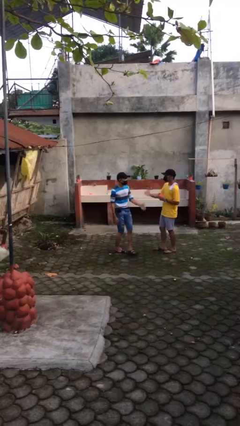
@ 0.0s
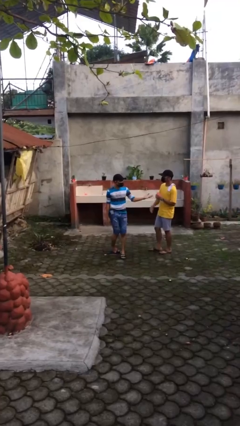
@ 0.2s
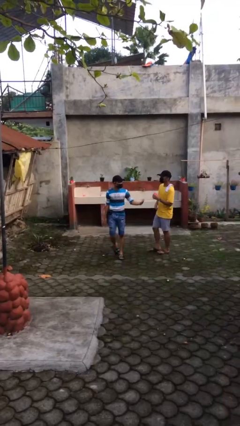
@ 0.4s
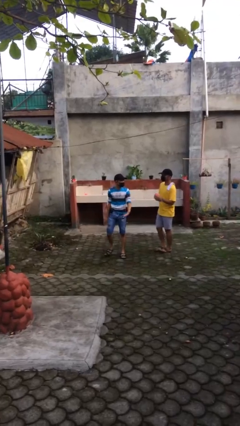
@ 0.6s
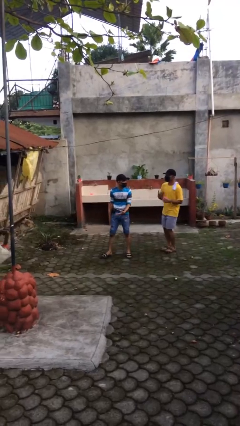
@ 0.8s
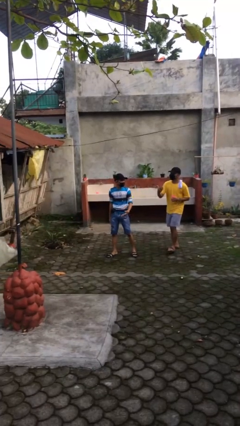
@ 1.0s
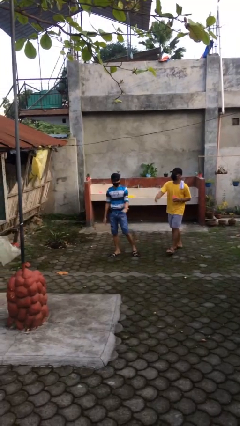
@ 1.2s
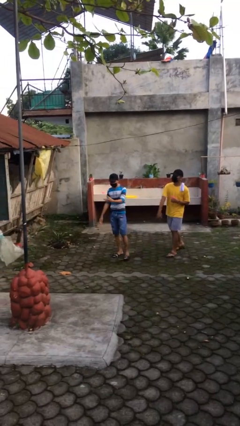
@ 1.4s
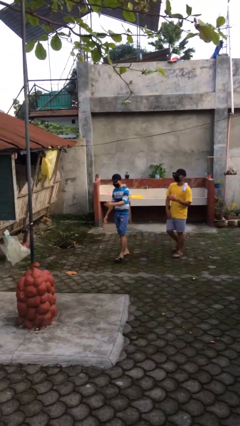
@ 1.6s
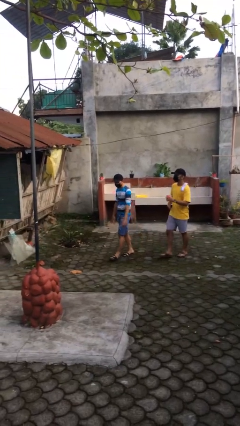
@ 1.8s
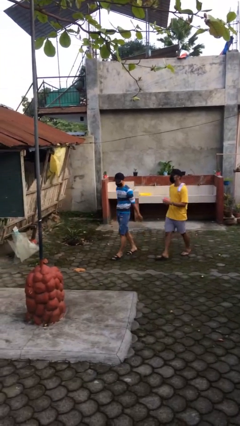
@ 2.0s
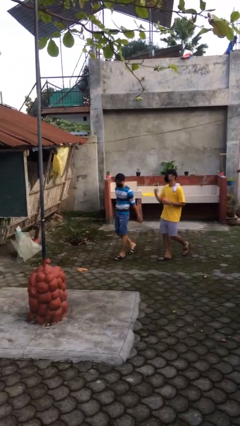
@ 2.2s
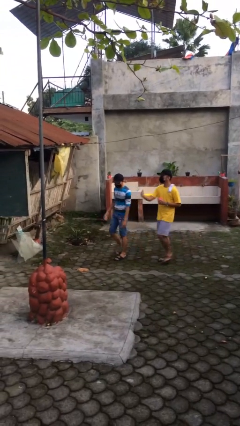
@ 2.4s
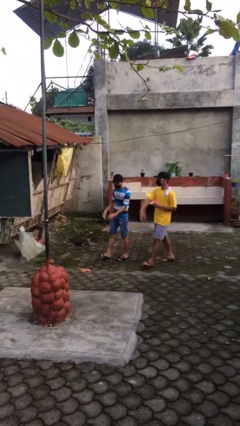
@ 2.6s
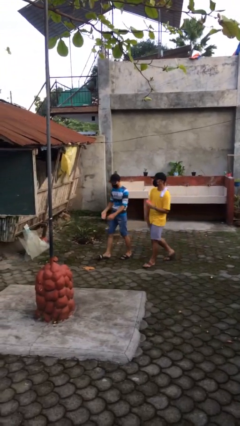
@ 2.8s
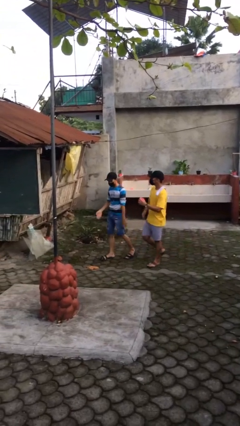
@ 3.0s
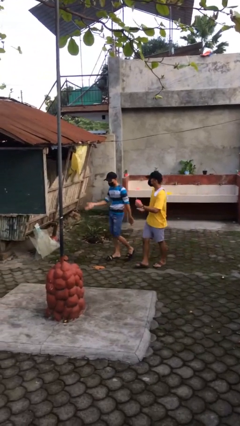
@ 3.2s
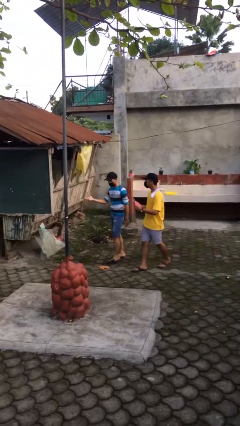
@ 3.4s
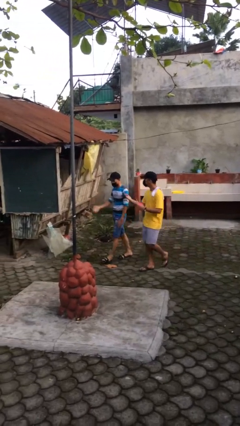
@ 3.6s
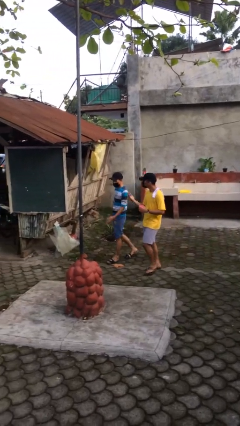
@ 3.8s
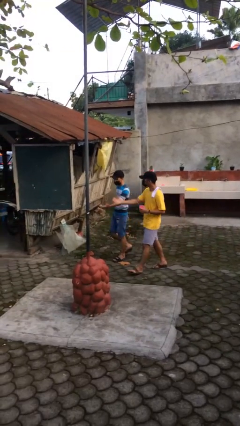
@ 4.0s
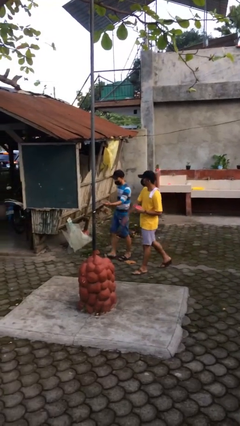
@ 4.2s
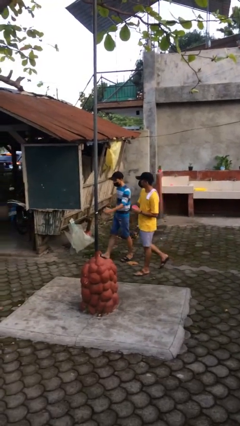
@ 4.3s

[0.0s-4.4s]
person talks to person

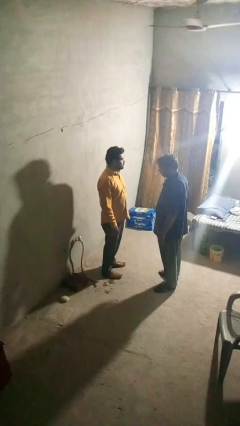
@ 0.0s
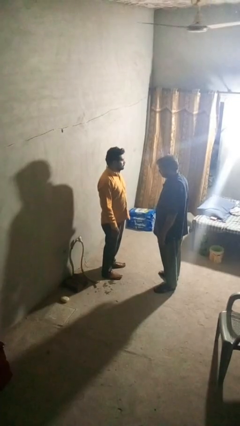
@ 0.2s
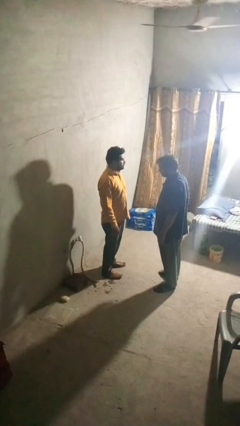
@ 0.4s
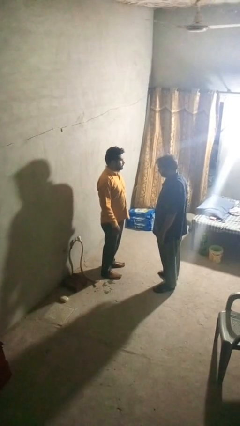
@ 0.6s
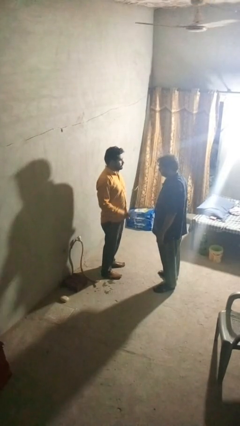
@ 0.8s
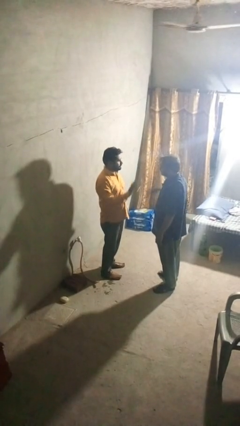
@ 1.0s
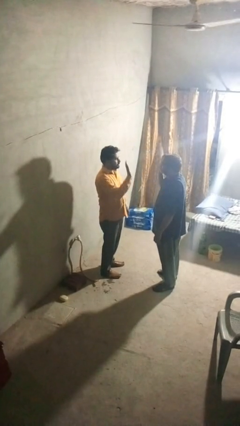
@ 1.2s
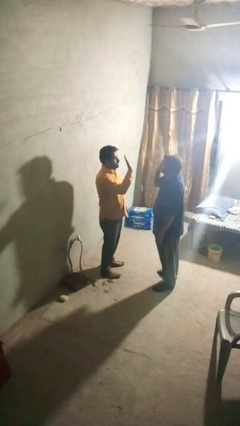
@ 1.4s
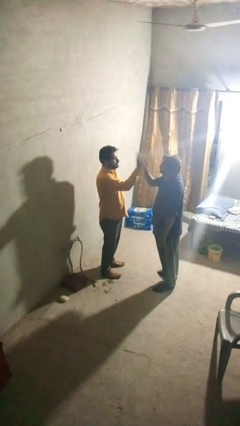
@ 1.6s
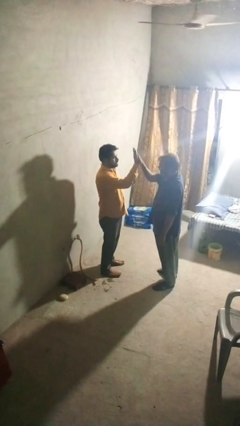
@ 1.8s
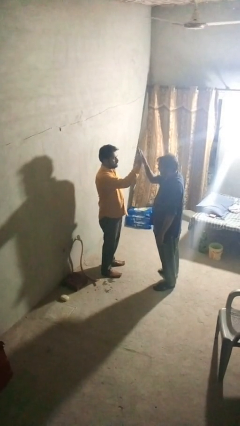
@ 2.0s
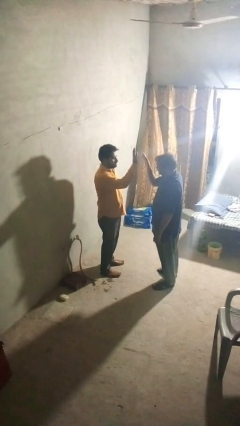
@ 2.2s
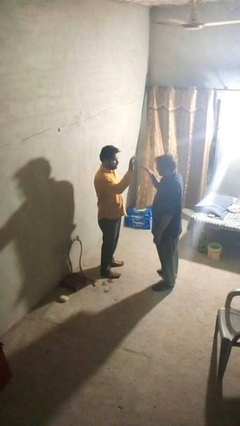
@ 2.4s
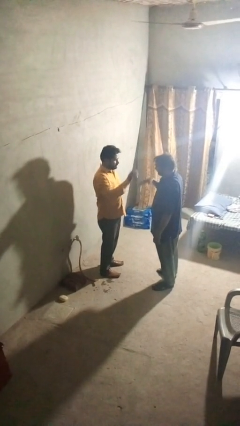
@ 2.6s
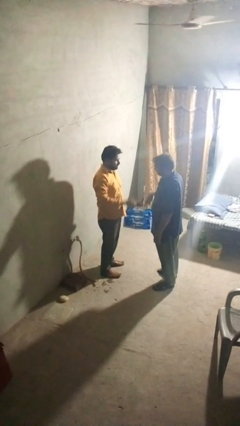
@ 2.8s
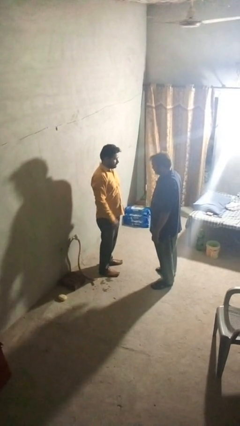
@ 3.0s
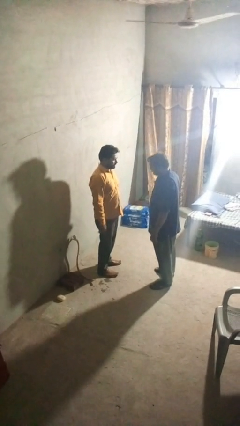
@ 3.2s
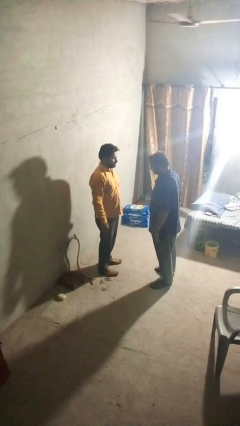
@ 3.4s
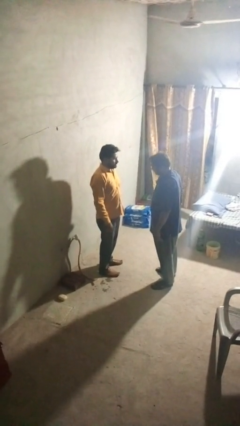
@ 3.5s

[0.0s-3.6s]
person highfives hand

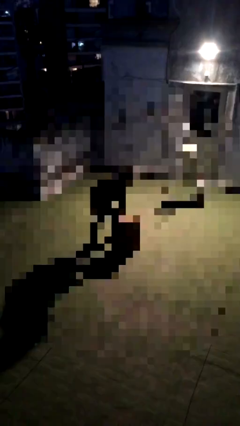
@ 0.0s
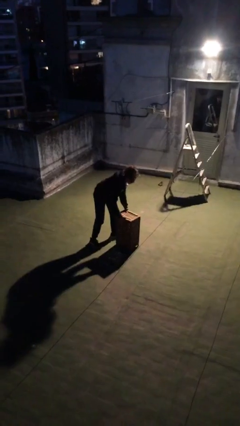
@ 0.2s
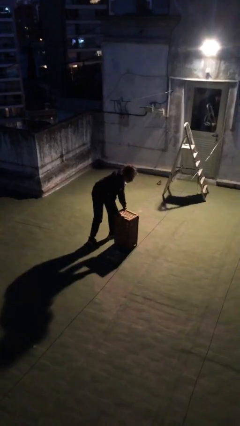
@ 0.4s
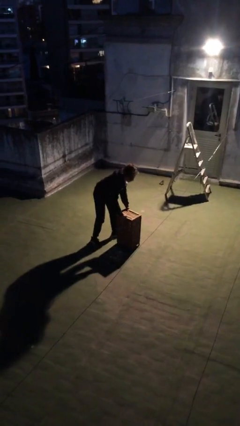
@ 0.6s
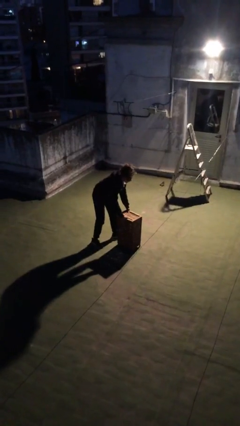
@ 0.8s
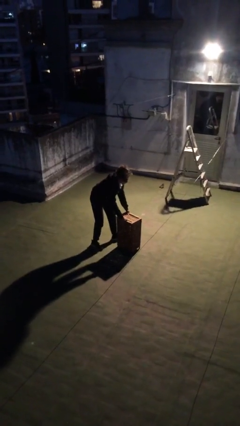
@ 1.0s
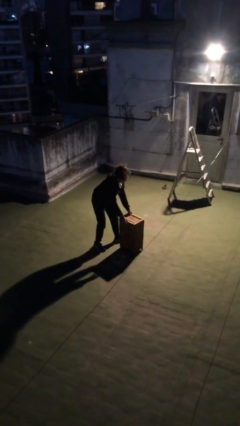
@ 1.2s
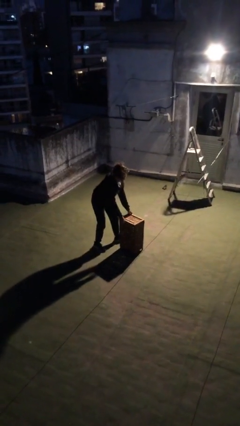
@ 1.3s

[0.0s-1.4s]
person puts down object on floor

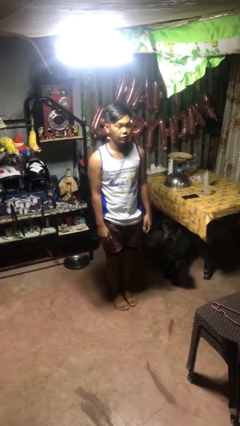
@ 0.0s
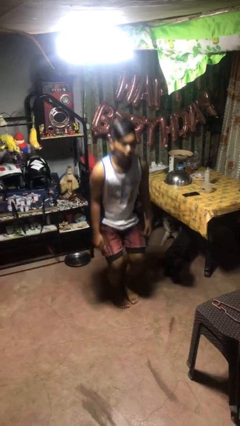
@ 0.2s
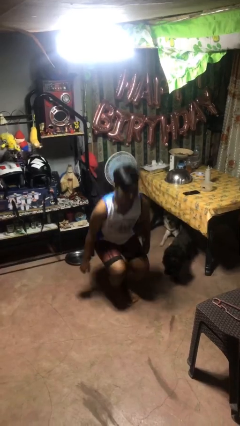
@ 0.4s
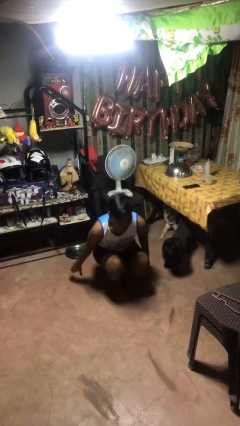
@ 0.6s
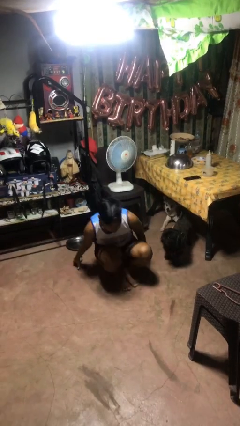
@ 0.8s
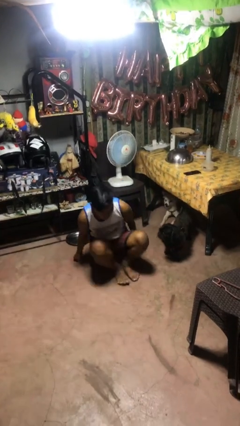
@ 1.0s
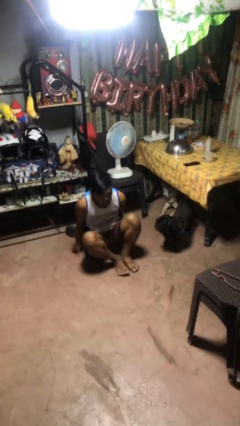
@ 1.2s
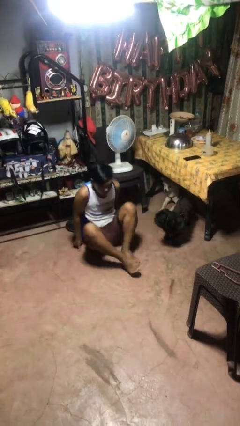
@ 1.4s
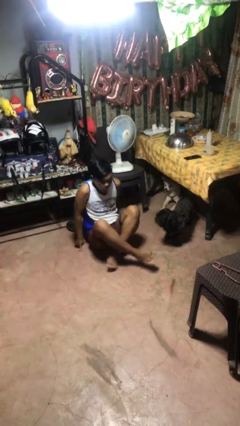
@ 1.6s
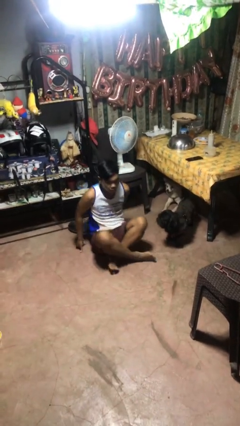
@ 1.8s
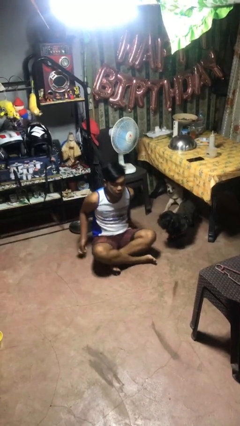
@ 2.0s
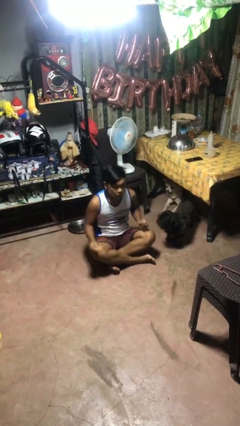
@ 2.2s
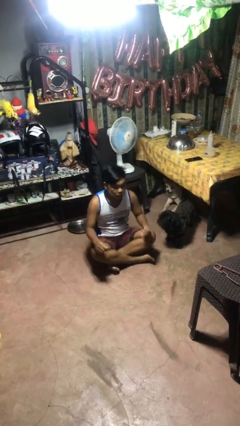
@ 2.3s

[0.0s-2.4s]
person sits crisscross

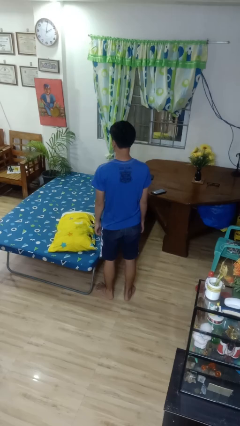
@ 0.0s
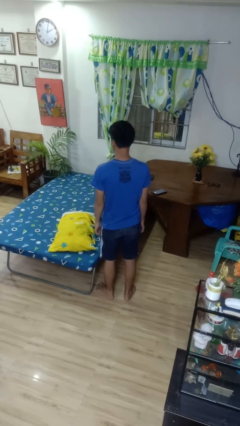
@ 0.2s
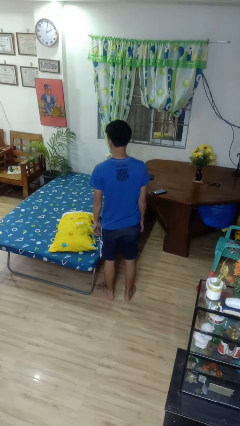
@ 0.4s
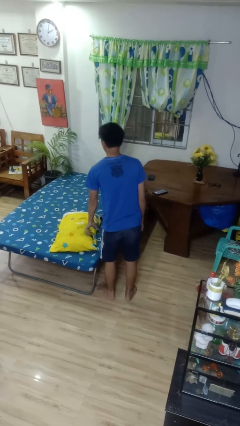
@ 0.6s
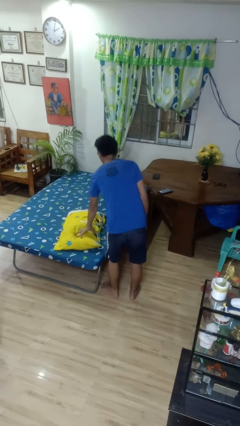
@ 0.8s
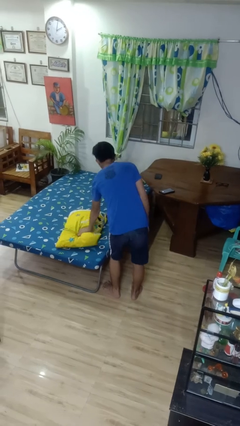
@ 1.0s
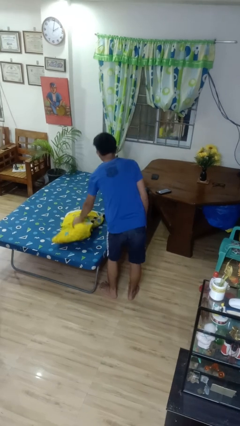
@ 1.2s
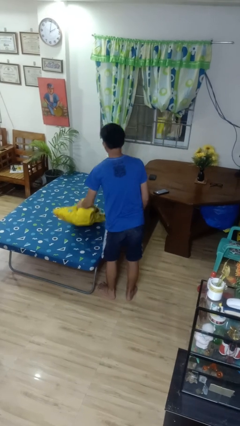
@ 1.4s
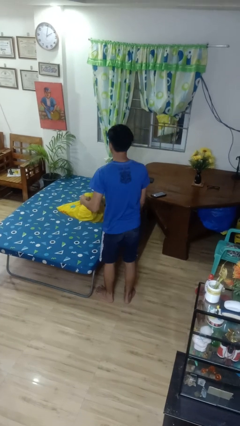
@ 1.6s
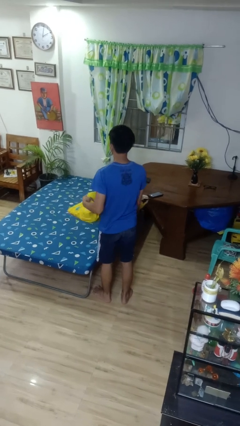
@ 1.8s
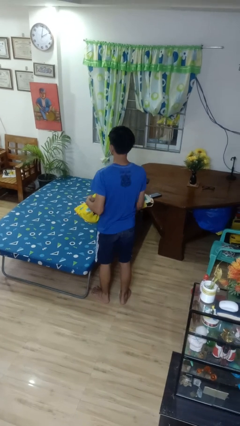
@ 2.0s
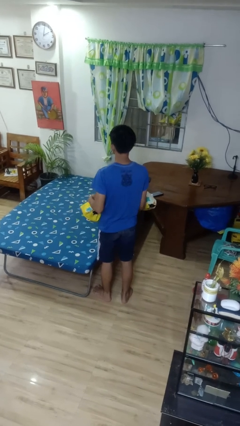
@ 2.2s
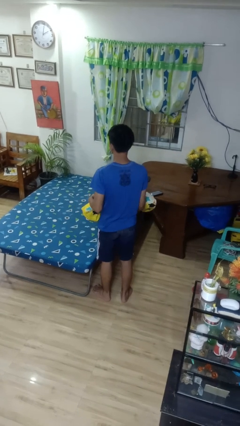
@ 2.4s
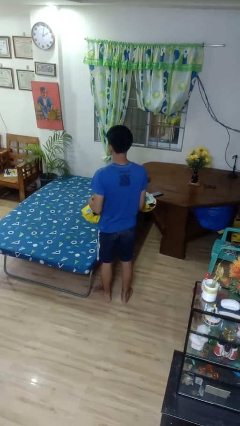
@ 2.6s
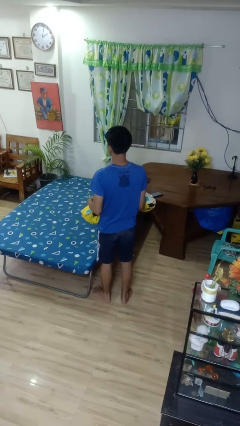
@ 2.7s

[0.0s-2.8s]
person picks up object from bed

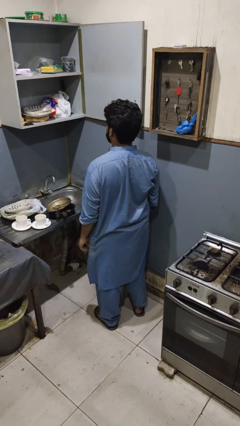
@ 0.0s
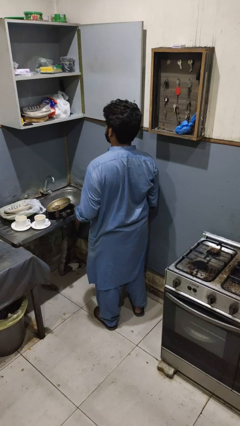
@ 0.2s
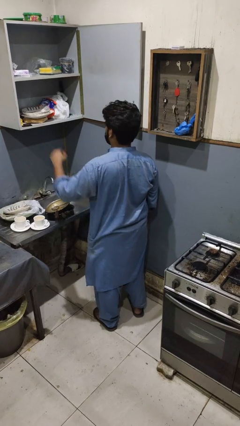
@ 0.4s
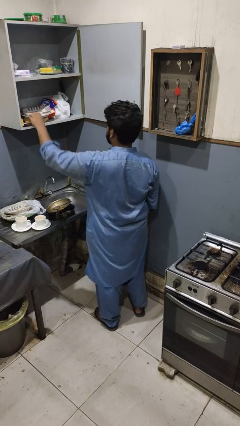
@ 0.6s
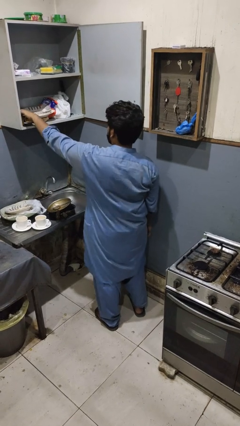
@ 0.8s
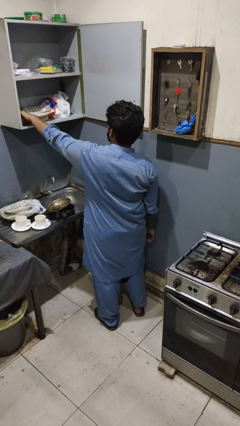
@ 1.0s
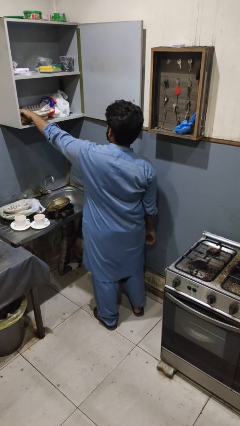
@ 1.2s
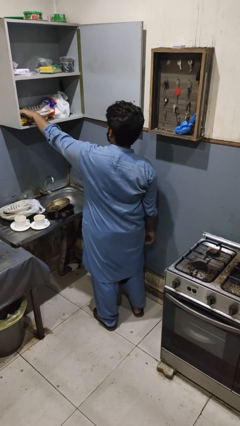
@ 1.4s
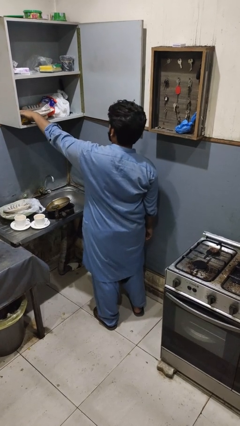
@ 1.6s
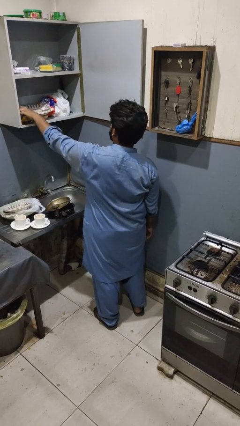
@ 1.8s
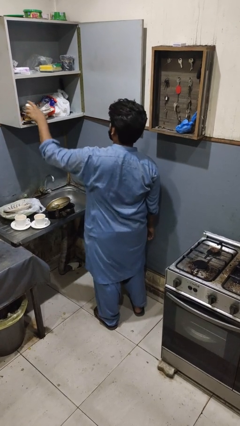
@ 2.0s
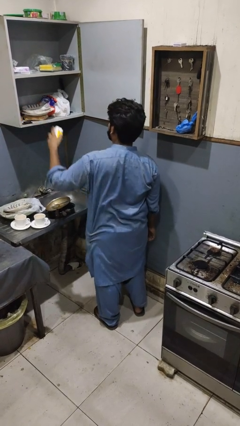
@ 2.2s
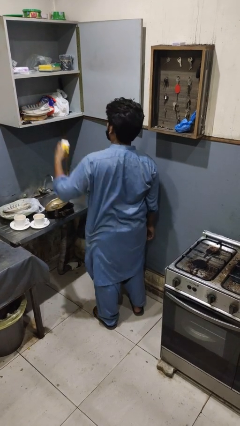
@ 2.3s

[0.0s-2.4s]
person takes object from cabinet

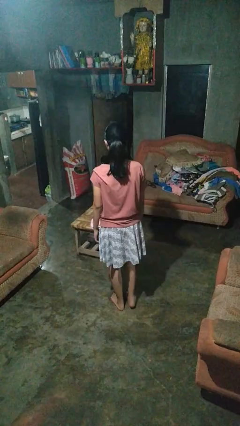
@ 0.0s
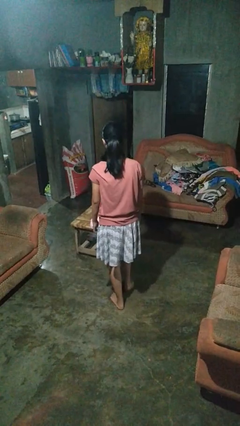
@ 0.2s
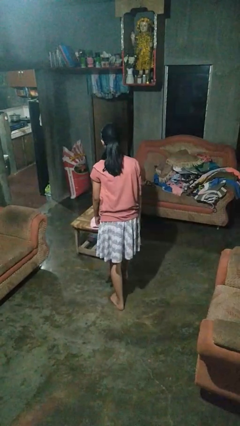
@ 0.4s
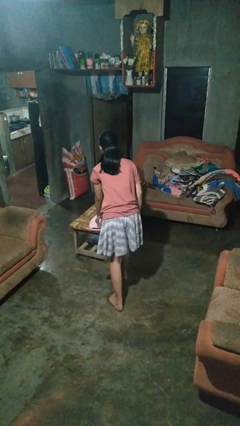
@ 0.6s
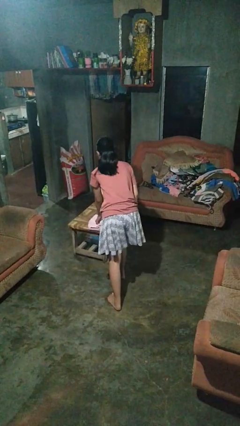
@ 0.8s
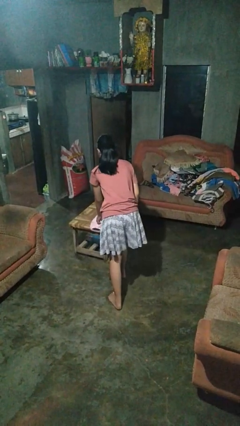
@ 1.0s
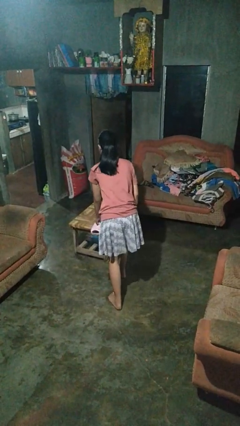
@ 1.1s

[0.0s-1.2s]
person picks up object from table
